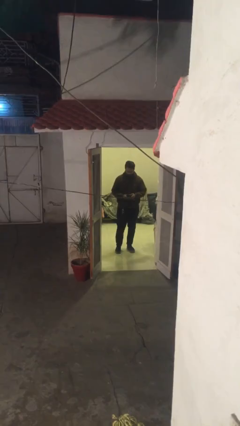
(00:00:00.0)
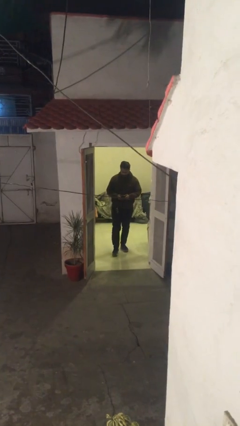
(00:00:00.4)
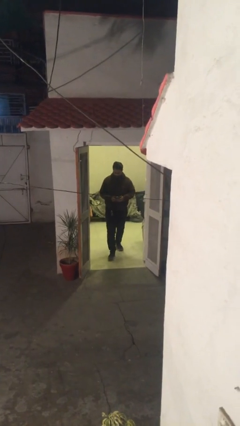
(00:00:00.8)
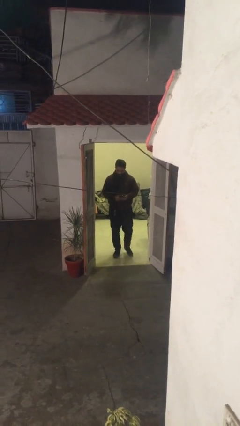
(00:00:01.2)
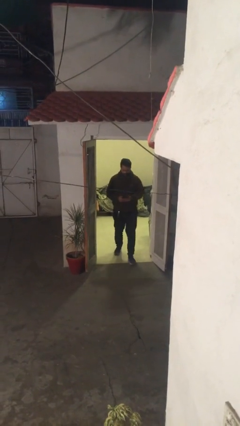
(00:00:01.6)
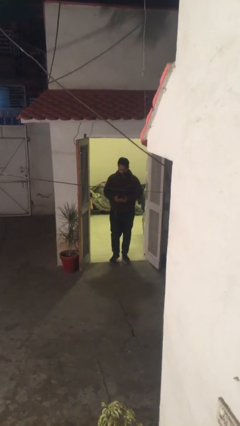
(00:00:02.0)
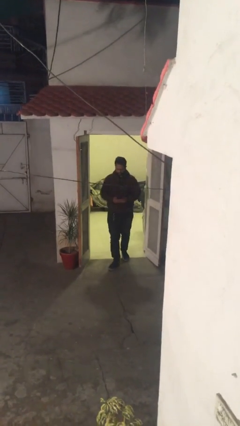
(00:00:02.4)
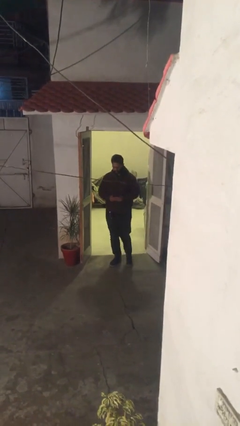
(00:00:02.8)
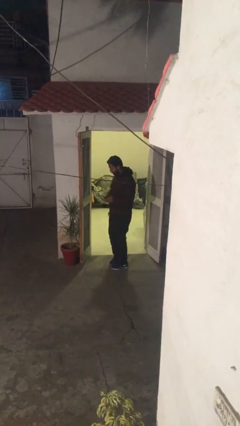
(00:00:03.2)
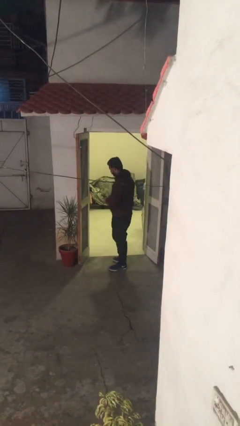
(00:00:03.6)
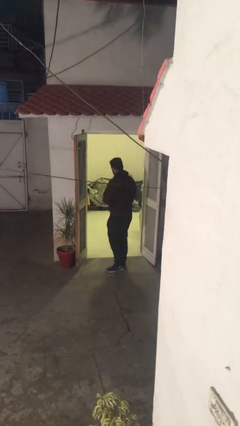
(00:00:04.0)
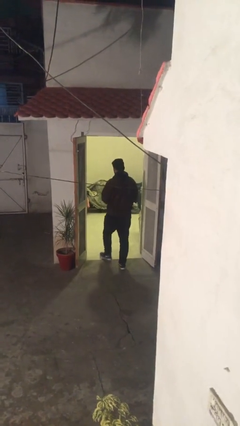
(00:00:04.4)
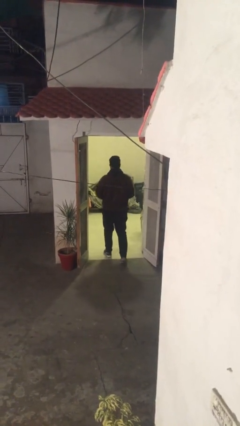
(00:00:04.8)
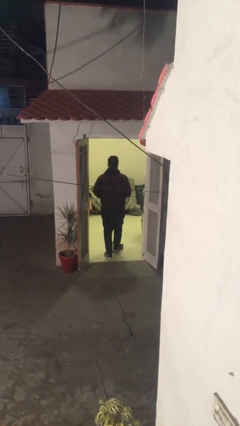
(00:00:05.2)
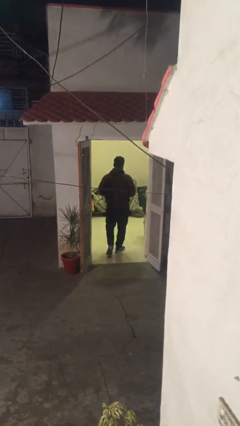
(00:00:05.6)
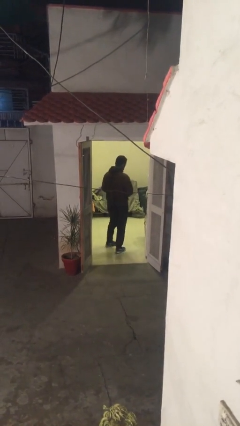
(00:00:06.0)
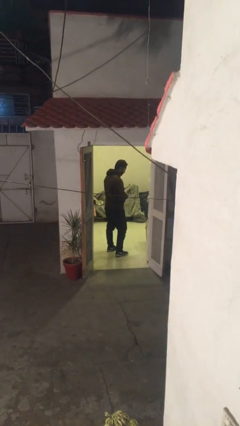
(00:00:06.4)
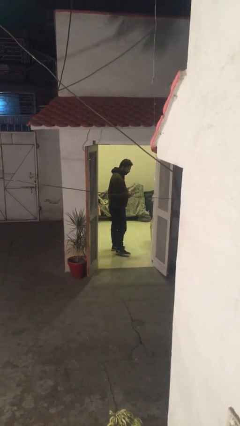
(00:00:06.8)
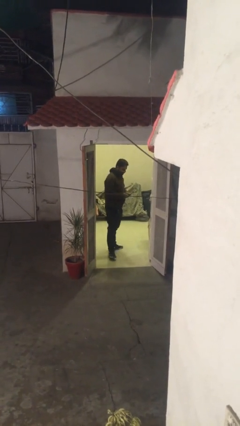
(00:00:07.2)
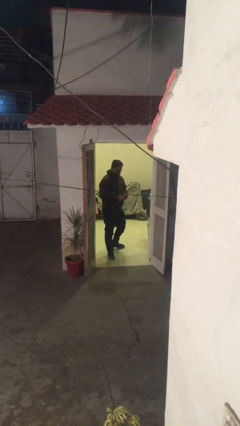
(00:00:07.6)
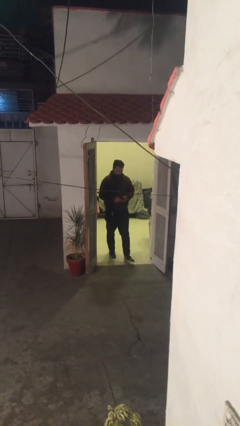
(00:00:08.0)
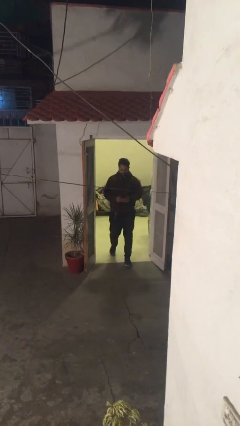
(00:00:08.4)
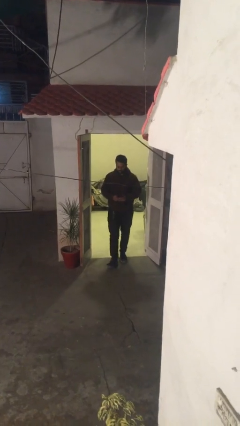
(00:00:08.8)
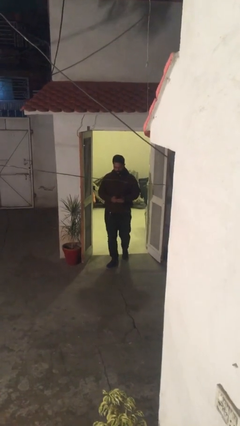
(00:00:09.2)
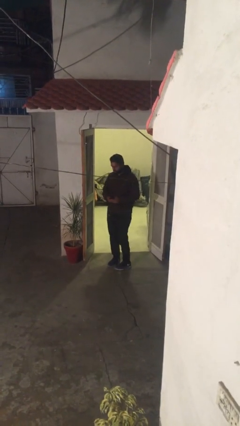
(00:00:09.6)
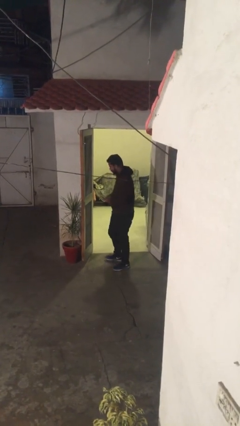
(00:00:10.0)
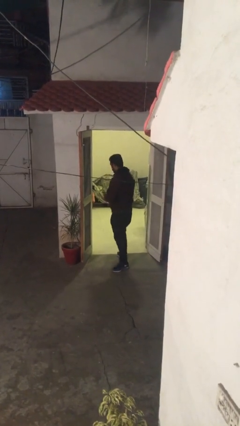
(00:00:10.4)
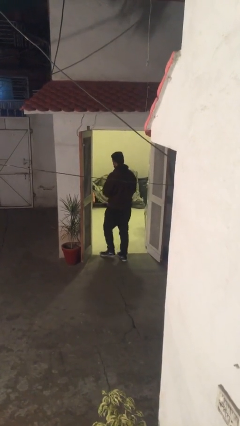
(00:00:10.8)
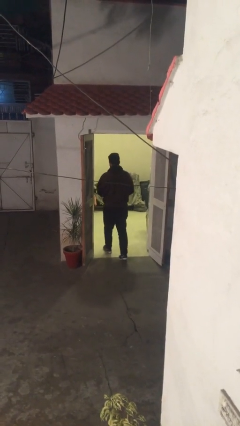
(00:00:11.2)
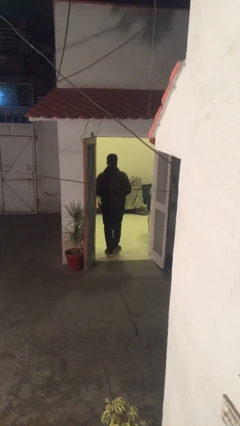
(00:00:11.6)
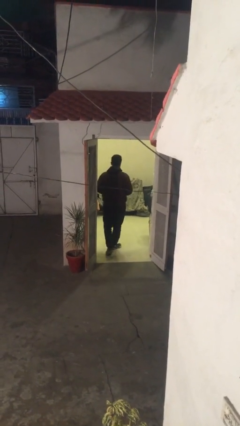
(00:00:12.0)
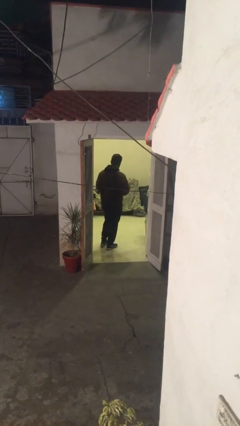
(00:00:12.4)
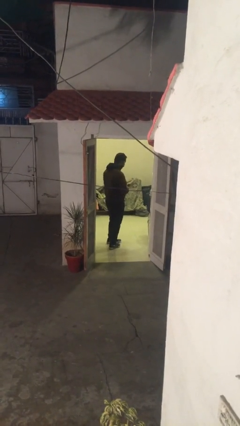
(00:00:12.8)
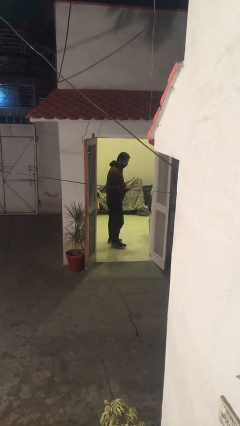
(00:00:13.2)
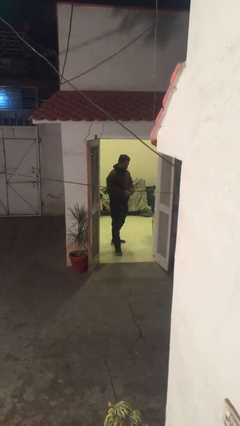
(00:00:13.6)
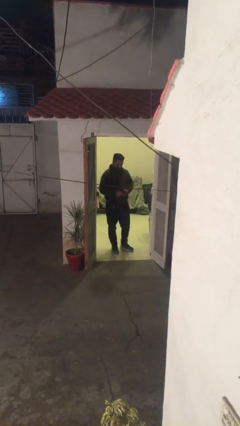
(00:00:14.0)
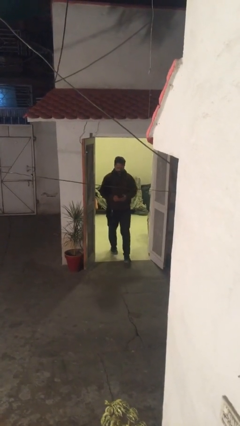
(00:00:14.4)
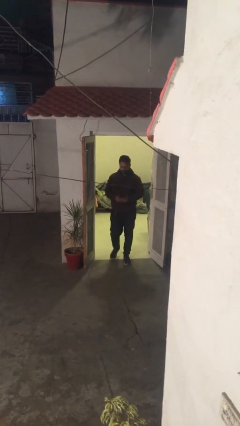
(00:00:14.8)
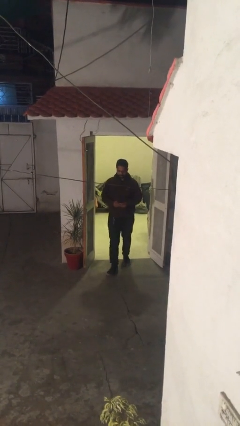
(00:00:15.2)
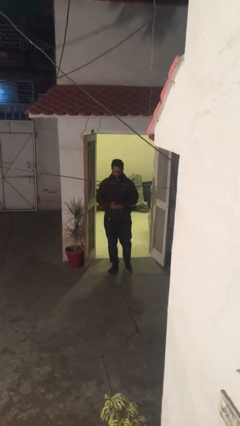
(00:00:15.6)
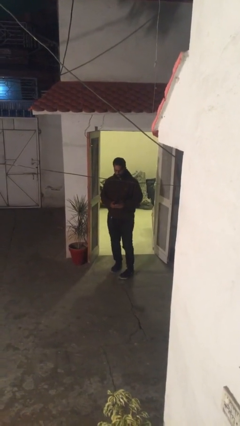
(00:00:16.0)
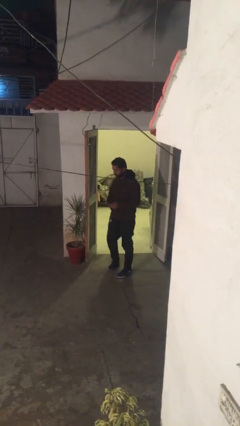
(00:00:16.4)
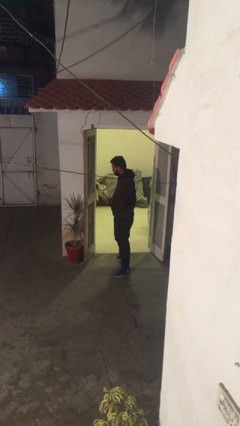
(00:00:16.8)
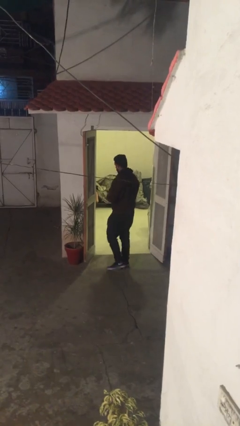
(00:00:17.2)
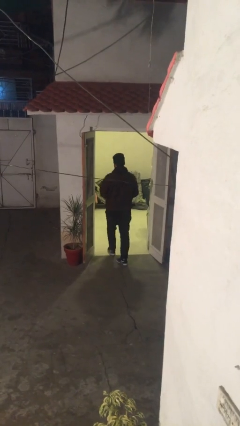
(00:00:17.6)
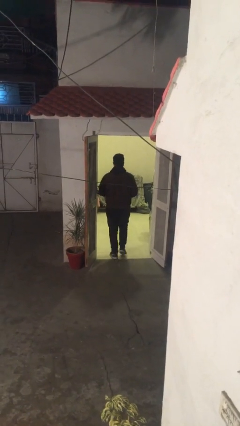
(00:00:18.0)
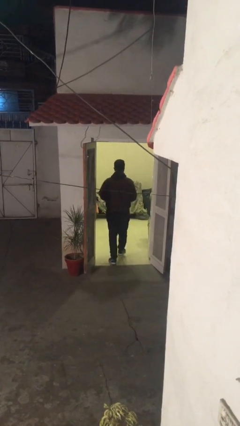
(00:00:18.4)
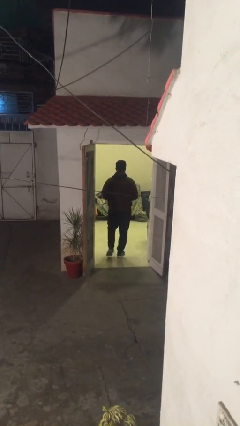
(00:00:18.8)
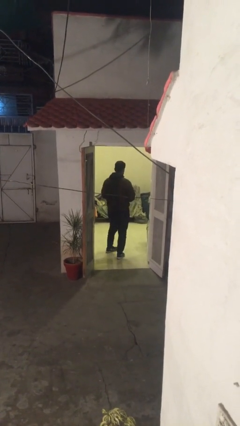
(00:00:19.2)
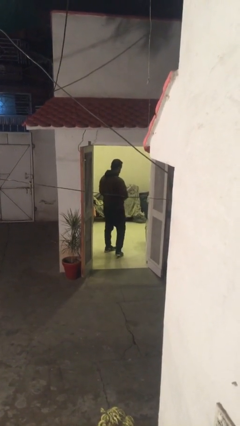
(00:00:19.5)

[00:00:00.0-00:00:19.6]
person texts on phone

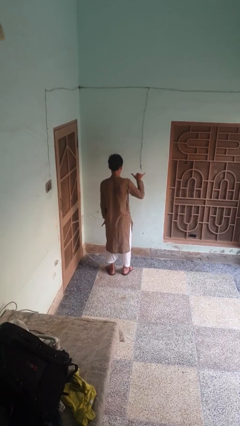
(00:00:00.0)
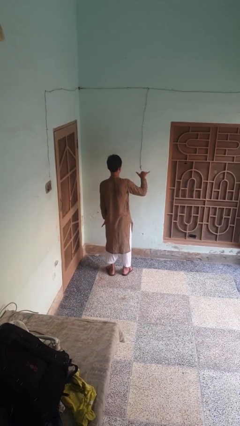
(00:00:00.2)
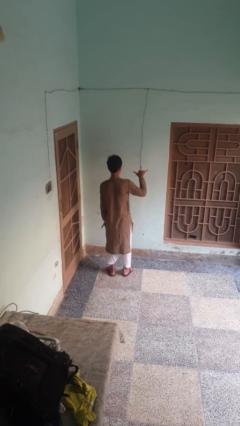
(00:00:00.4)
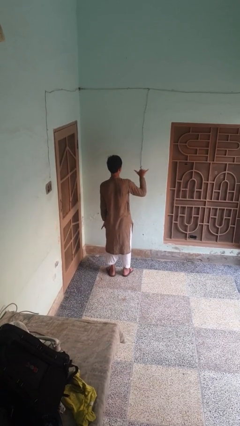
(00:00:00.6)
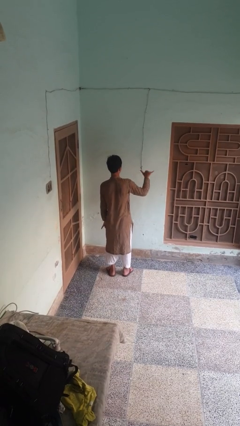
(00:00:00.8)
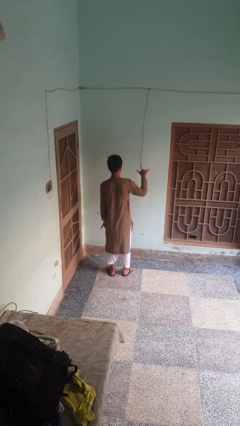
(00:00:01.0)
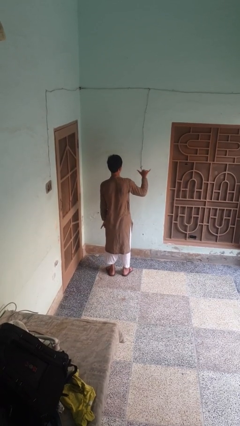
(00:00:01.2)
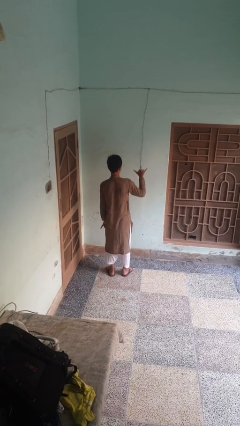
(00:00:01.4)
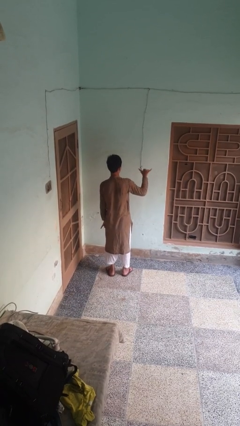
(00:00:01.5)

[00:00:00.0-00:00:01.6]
person gestures hang loose

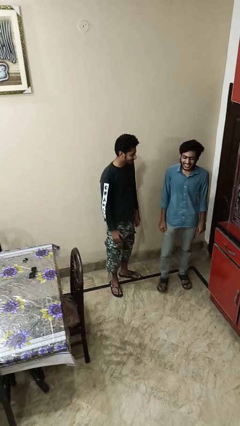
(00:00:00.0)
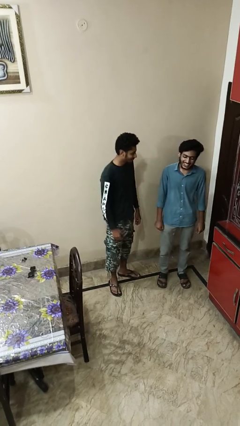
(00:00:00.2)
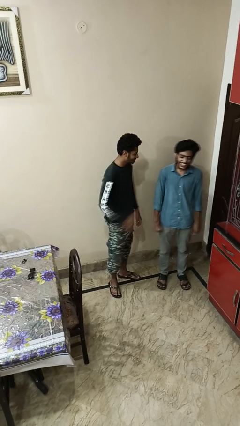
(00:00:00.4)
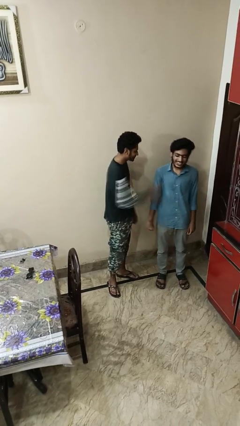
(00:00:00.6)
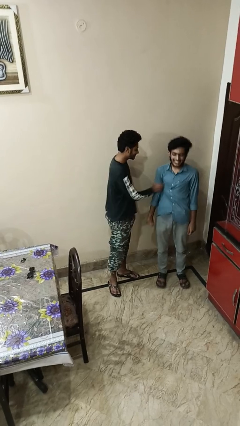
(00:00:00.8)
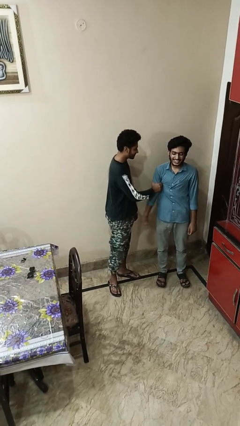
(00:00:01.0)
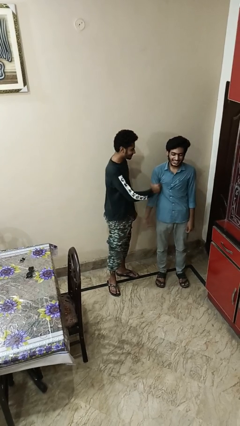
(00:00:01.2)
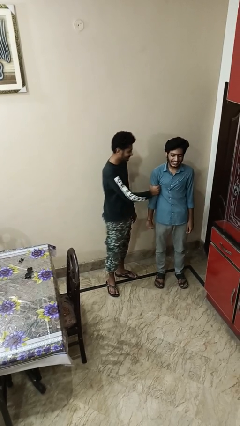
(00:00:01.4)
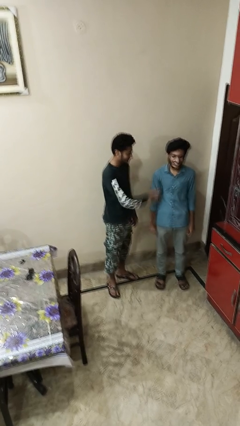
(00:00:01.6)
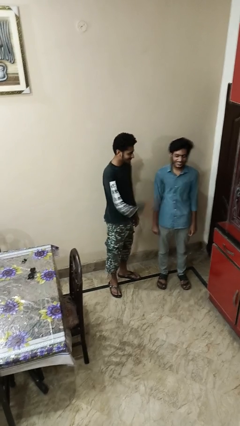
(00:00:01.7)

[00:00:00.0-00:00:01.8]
person grabs person by bicep

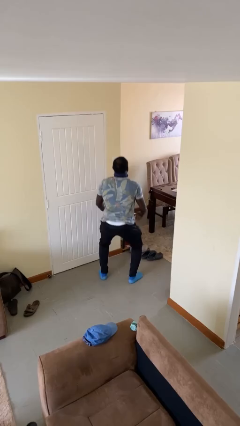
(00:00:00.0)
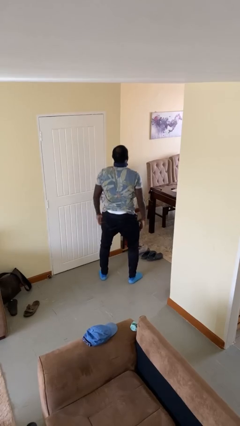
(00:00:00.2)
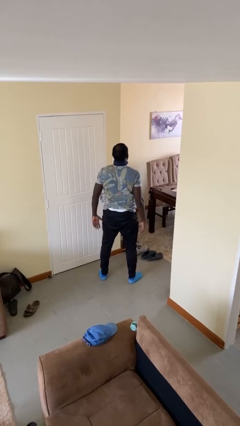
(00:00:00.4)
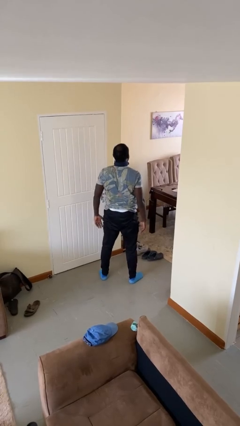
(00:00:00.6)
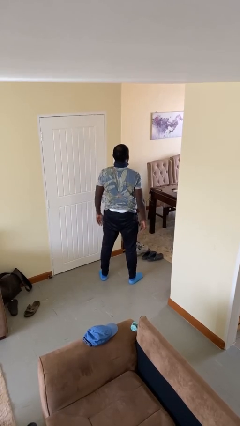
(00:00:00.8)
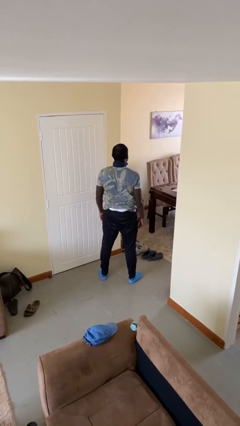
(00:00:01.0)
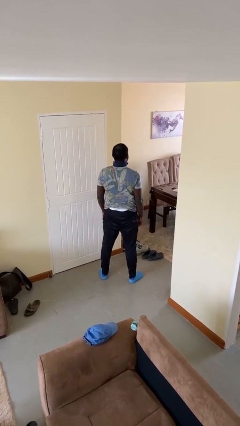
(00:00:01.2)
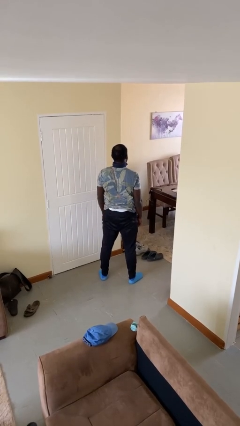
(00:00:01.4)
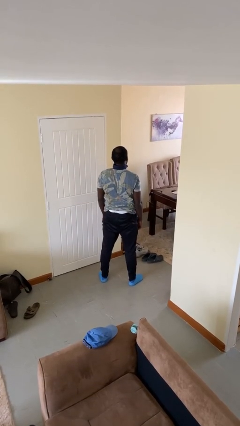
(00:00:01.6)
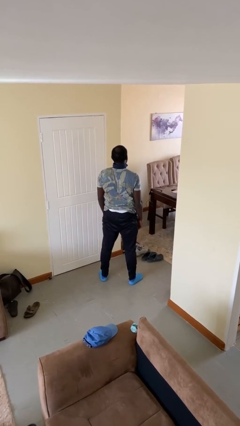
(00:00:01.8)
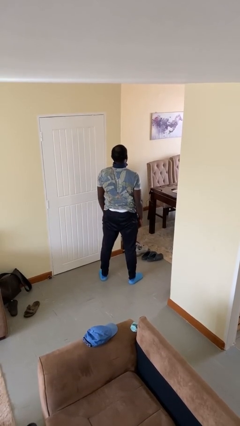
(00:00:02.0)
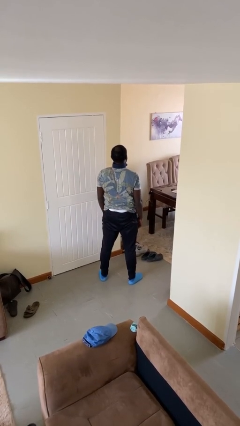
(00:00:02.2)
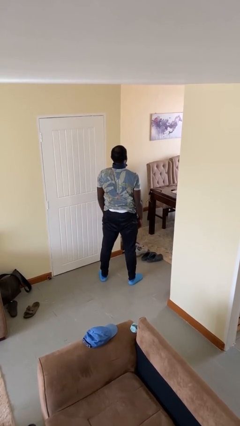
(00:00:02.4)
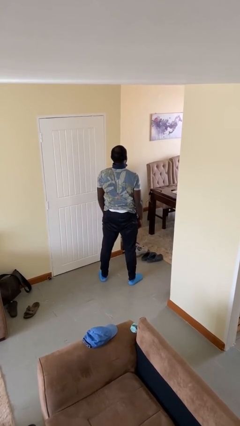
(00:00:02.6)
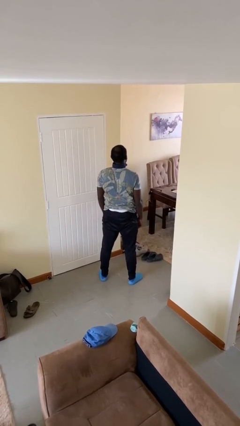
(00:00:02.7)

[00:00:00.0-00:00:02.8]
person stands up

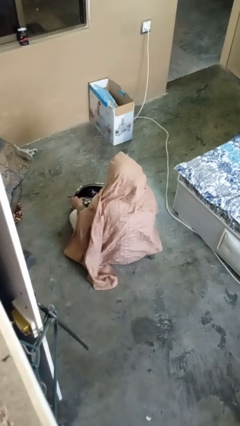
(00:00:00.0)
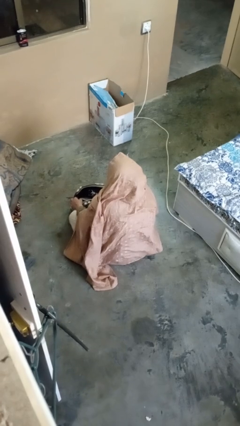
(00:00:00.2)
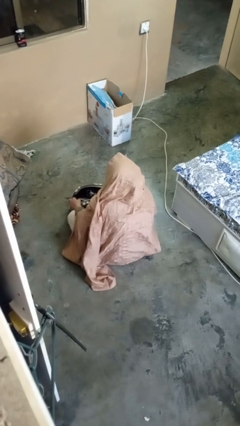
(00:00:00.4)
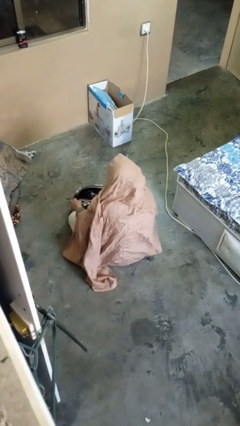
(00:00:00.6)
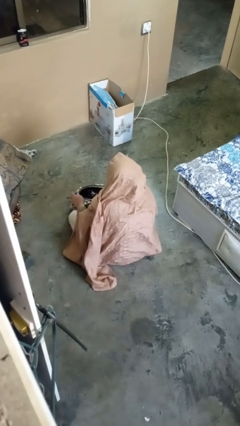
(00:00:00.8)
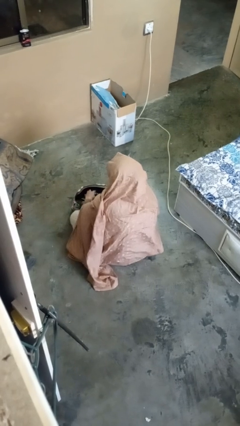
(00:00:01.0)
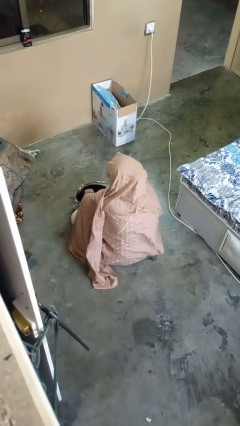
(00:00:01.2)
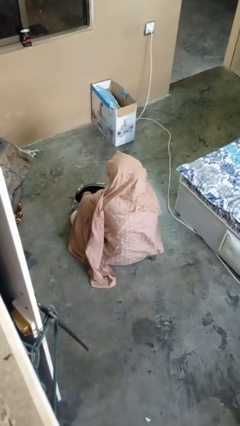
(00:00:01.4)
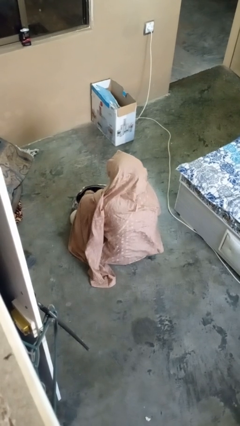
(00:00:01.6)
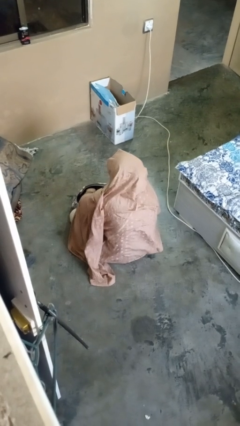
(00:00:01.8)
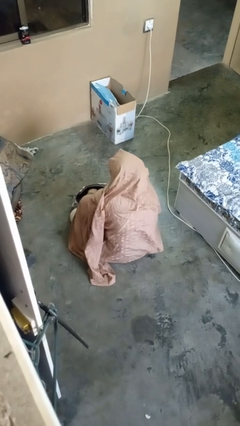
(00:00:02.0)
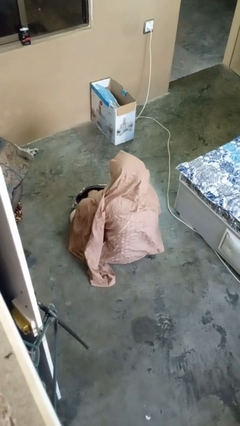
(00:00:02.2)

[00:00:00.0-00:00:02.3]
person searches in purse
